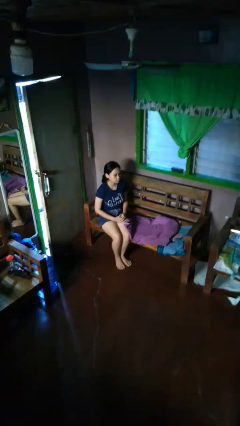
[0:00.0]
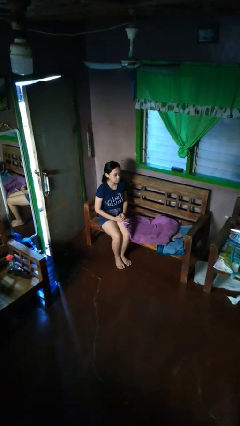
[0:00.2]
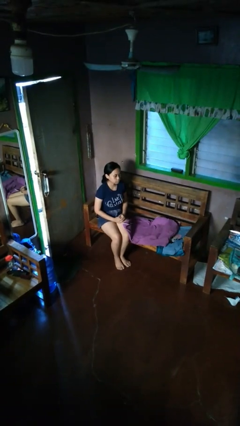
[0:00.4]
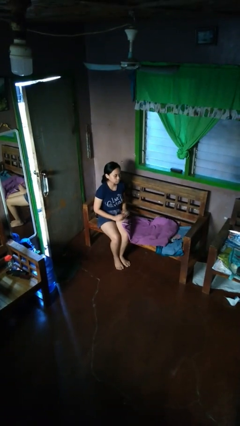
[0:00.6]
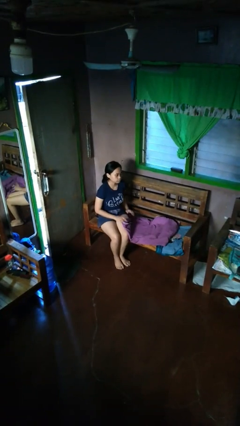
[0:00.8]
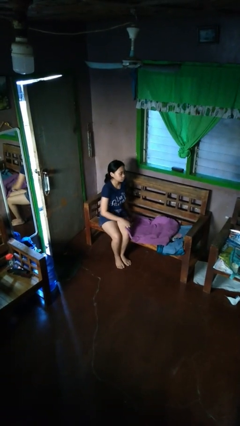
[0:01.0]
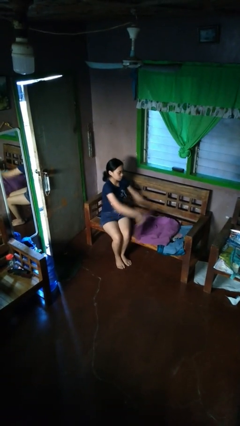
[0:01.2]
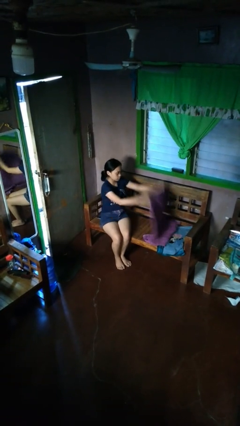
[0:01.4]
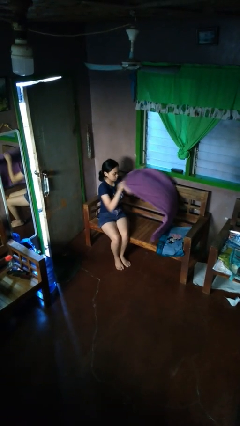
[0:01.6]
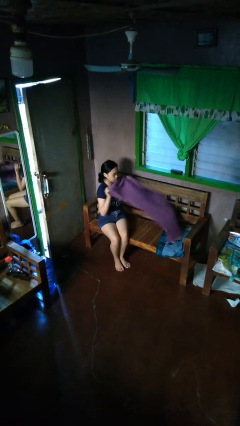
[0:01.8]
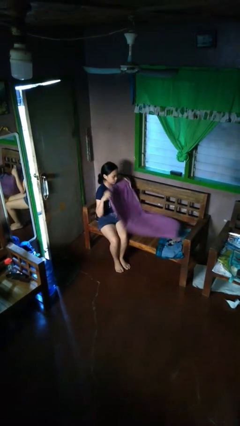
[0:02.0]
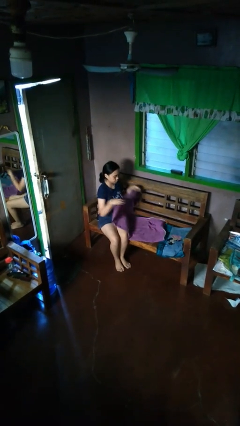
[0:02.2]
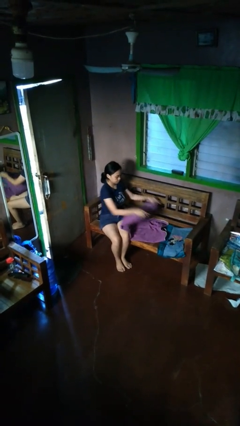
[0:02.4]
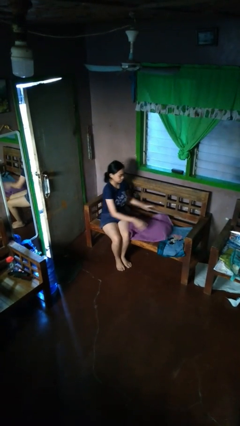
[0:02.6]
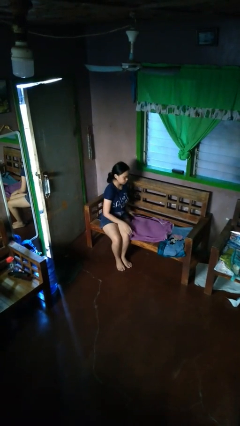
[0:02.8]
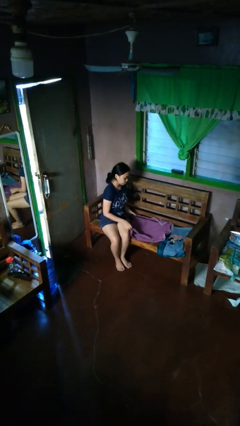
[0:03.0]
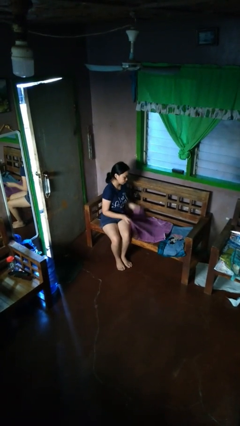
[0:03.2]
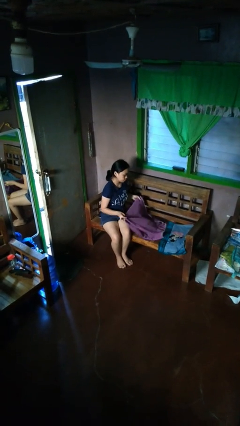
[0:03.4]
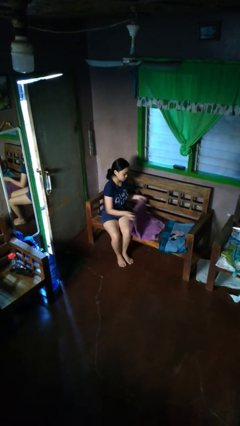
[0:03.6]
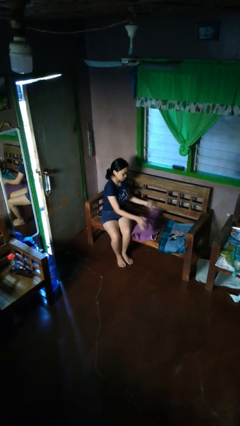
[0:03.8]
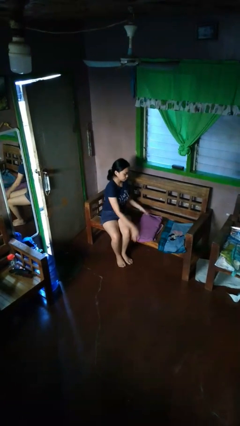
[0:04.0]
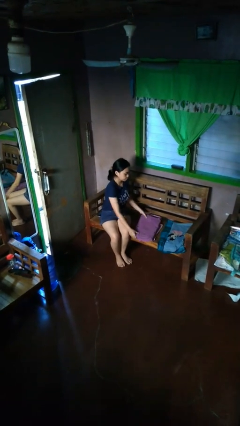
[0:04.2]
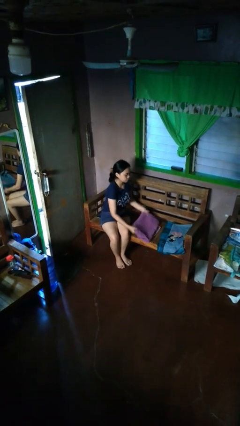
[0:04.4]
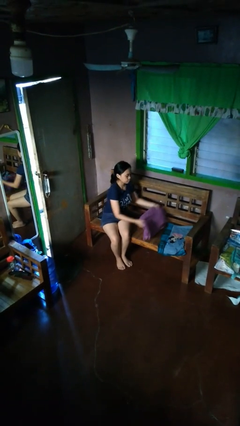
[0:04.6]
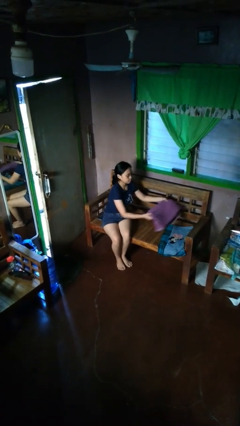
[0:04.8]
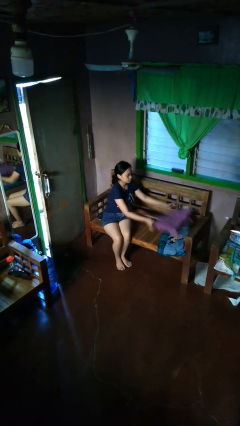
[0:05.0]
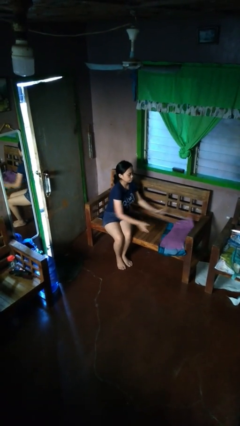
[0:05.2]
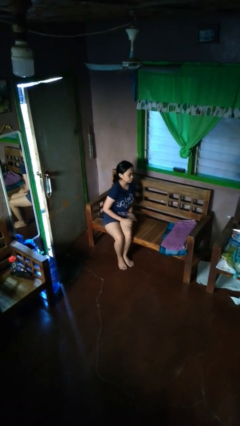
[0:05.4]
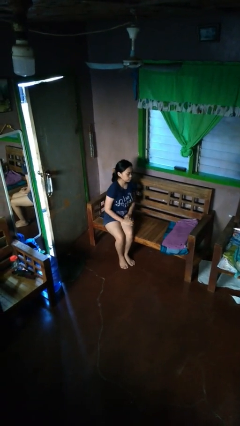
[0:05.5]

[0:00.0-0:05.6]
person folds blanket

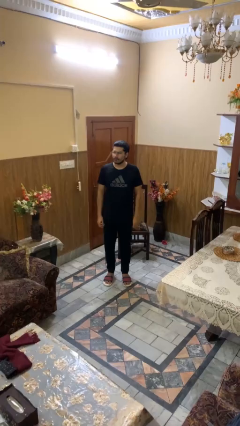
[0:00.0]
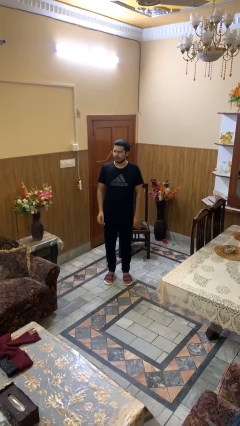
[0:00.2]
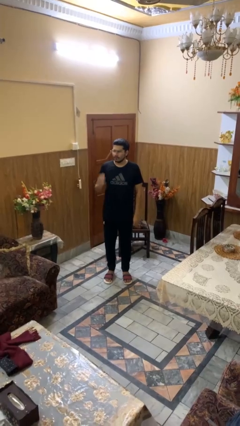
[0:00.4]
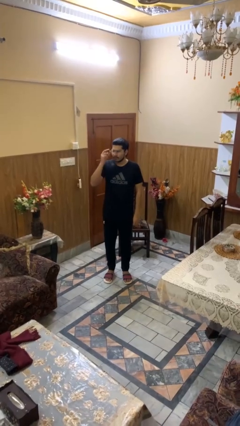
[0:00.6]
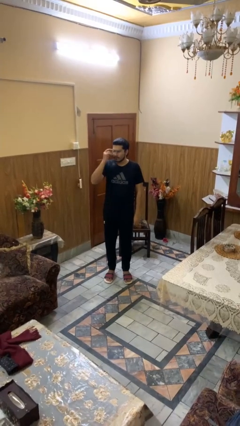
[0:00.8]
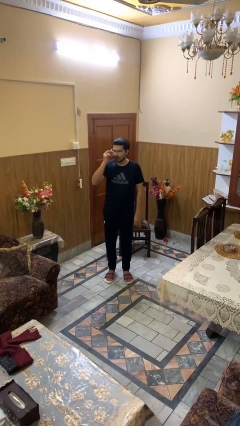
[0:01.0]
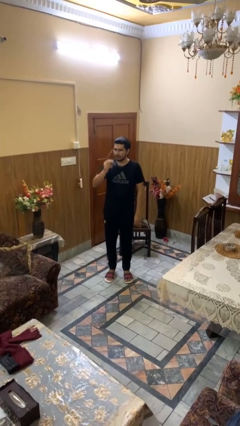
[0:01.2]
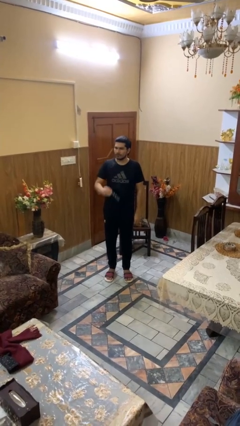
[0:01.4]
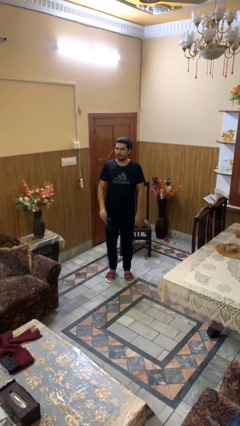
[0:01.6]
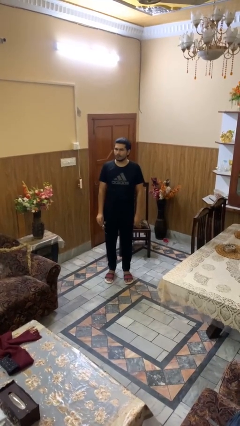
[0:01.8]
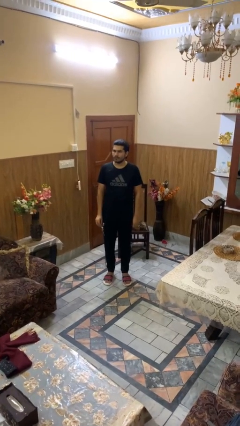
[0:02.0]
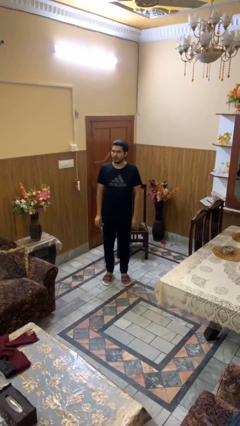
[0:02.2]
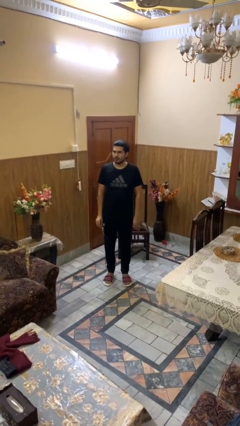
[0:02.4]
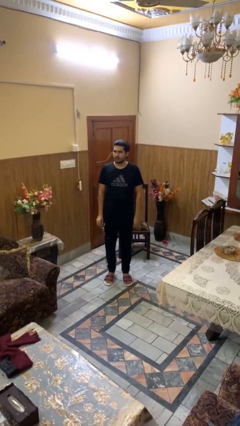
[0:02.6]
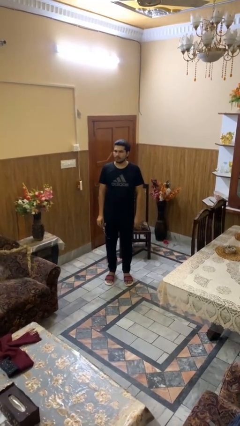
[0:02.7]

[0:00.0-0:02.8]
person takes off glasses

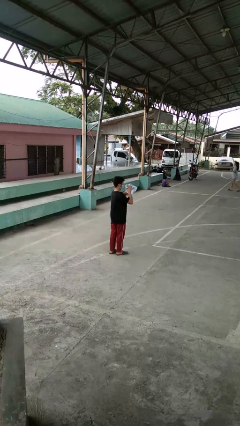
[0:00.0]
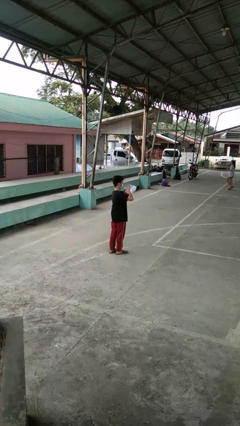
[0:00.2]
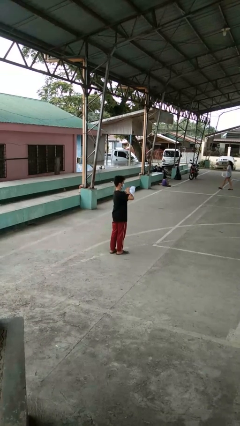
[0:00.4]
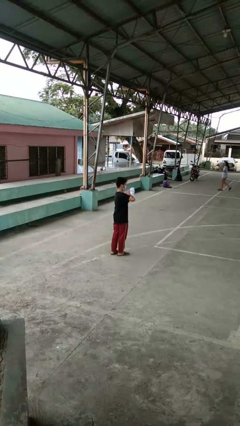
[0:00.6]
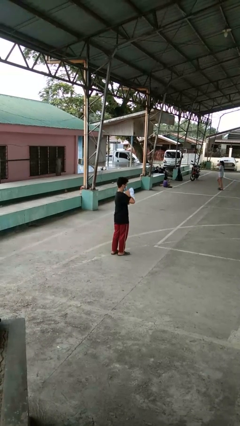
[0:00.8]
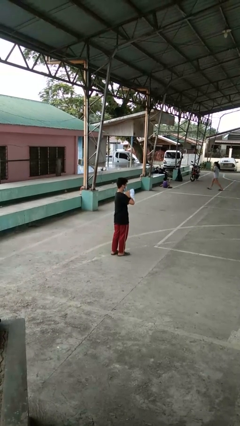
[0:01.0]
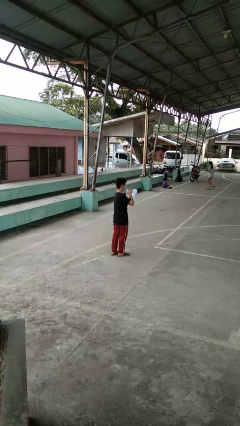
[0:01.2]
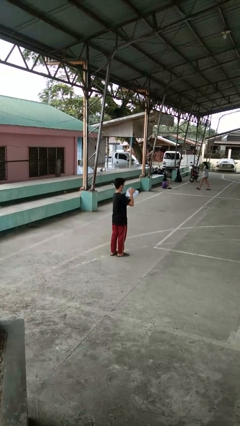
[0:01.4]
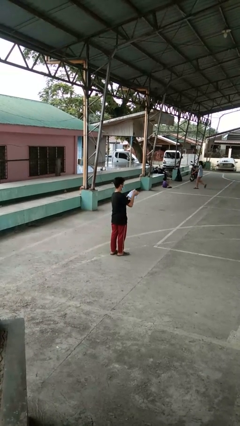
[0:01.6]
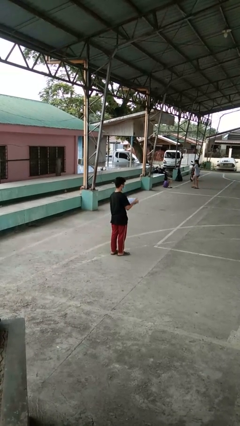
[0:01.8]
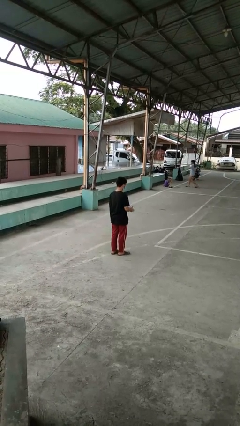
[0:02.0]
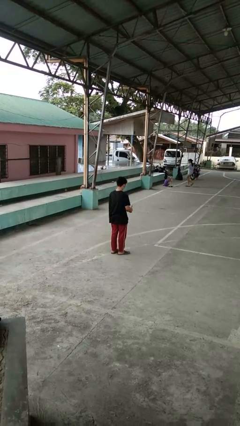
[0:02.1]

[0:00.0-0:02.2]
person squeezes object

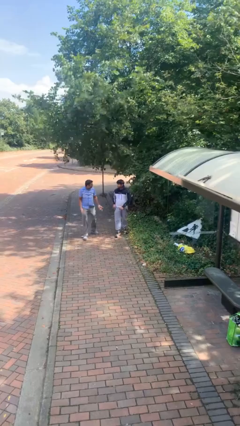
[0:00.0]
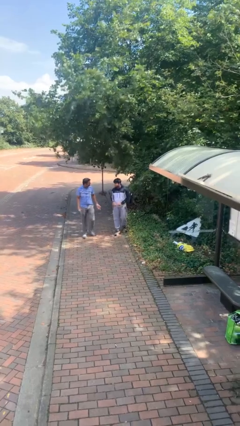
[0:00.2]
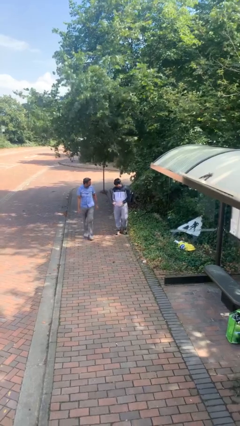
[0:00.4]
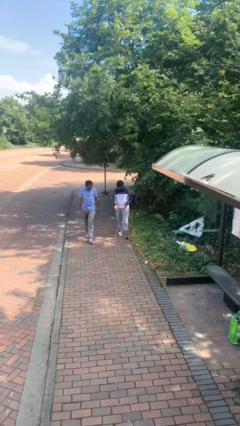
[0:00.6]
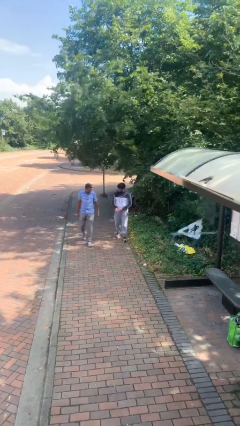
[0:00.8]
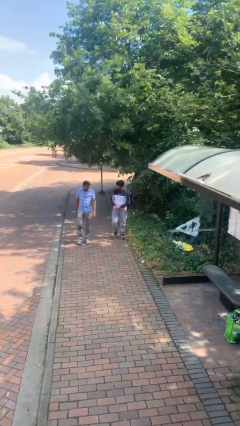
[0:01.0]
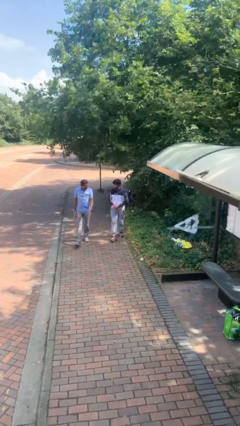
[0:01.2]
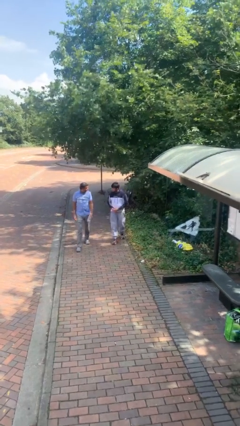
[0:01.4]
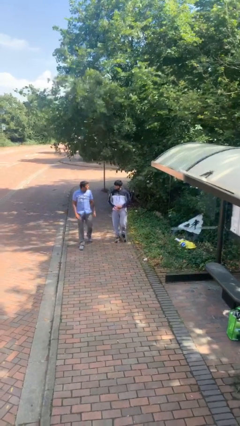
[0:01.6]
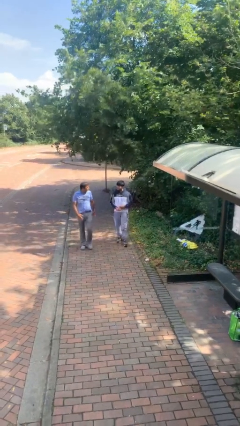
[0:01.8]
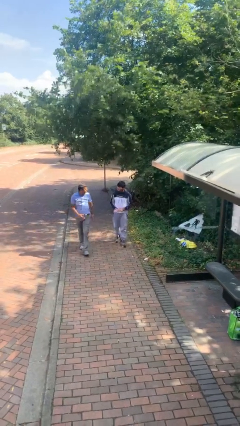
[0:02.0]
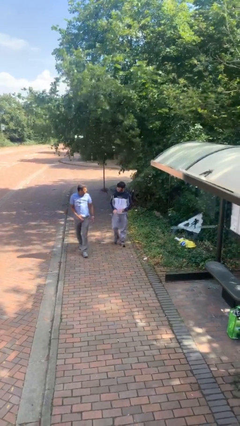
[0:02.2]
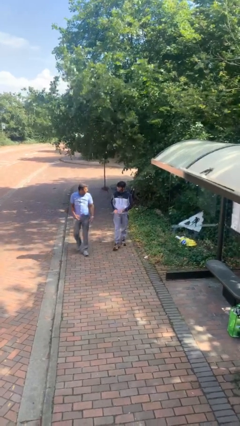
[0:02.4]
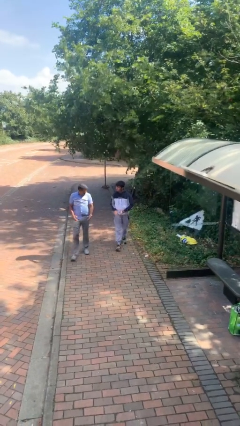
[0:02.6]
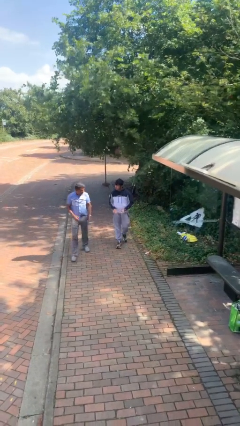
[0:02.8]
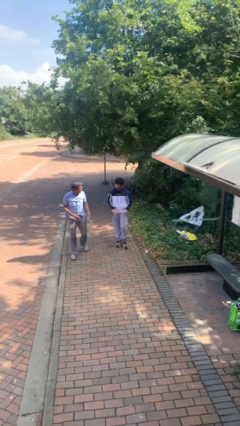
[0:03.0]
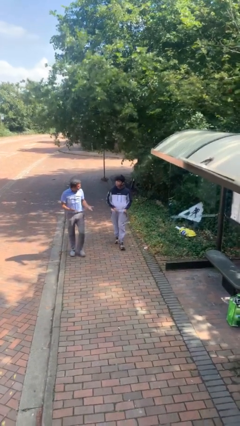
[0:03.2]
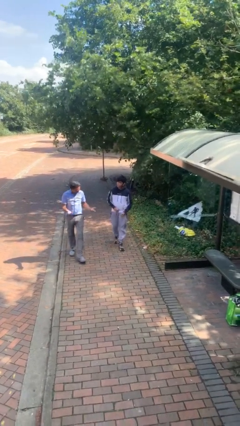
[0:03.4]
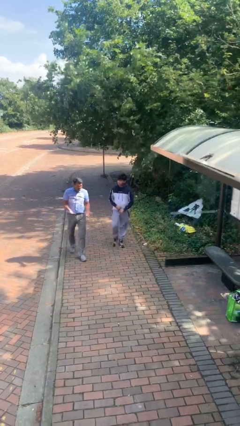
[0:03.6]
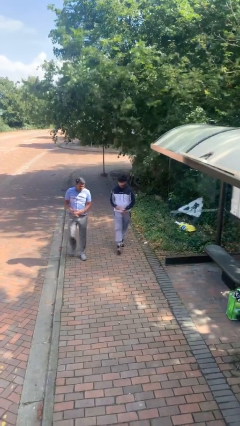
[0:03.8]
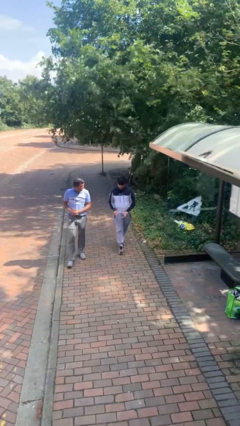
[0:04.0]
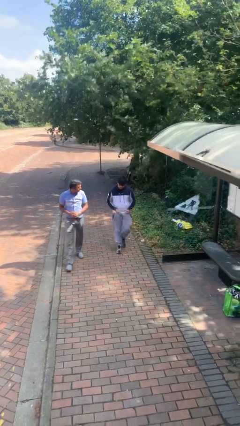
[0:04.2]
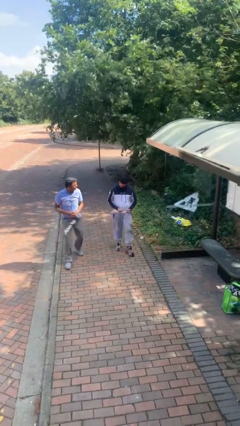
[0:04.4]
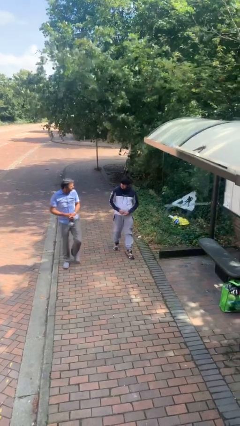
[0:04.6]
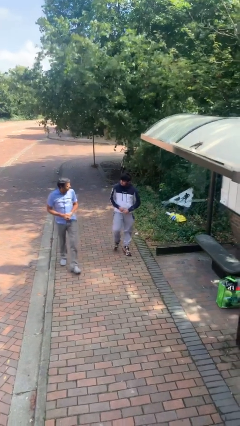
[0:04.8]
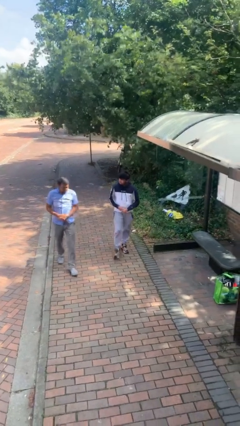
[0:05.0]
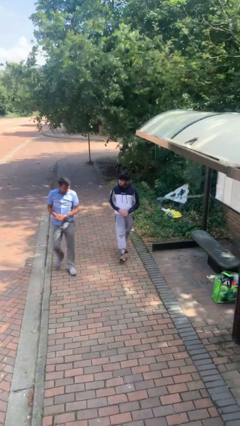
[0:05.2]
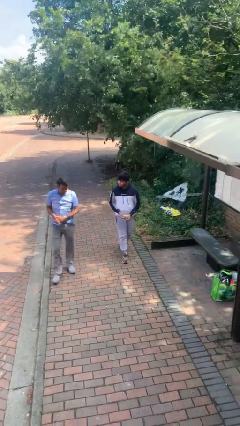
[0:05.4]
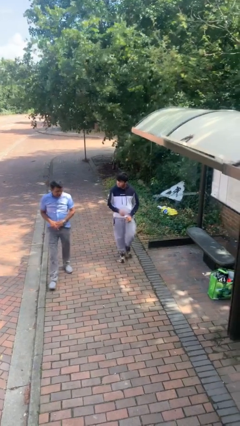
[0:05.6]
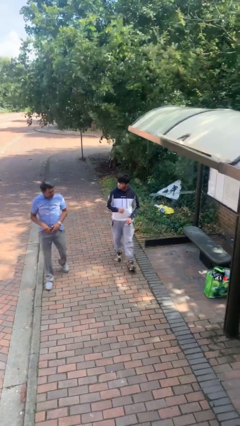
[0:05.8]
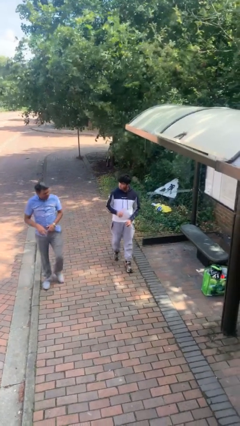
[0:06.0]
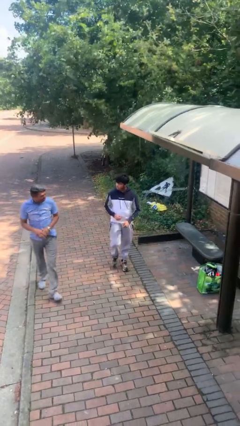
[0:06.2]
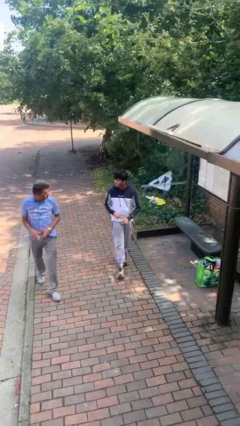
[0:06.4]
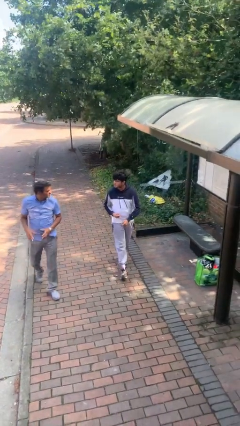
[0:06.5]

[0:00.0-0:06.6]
person talks to person

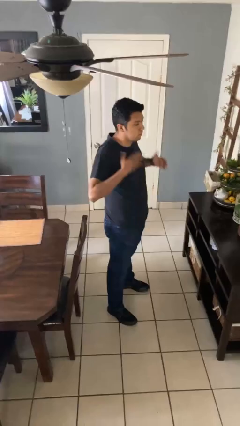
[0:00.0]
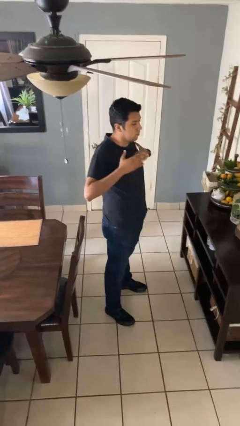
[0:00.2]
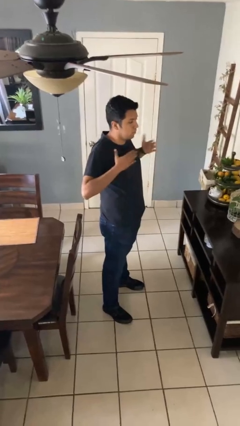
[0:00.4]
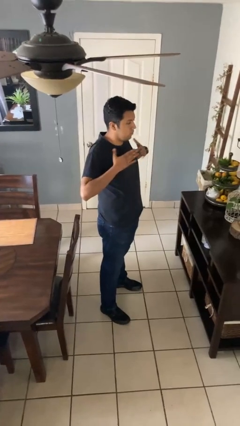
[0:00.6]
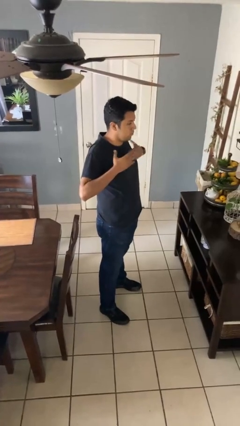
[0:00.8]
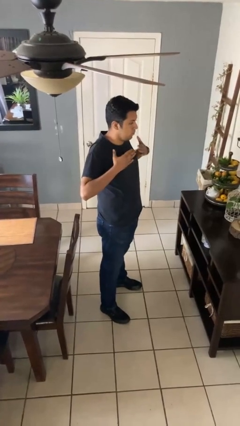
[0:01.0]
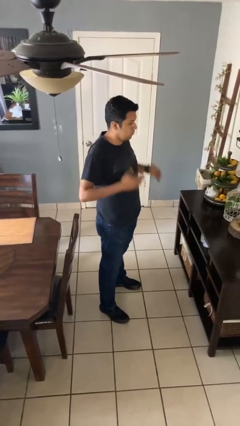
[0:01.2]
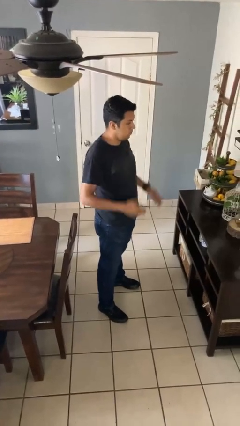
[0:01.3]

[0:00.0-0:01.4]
person drums on chest
